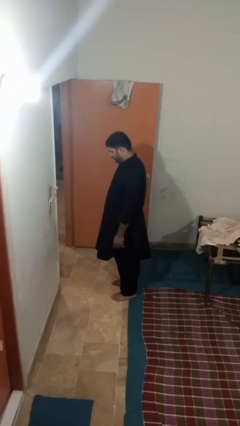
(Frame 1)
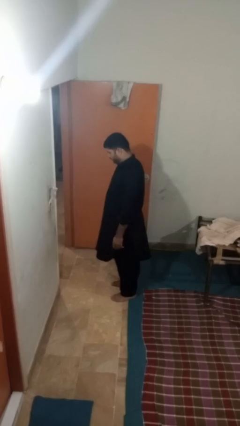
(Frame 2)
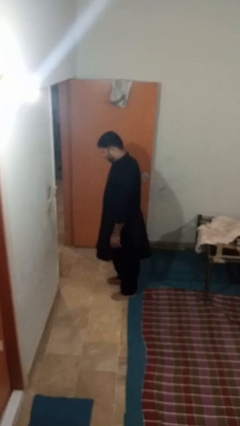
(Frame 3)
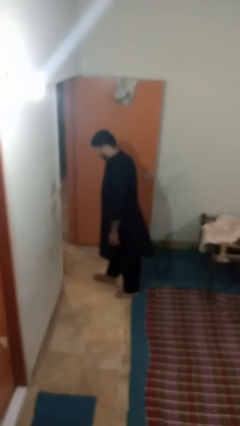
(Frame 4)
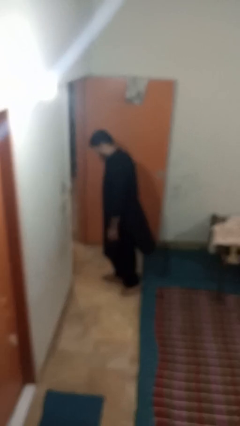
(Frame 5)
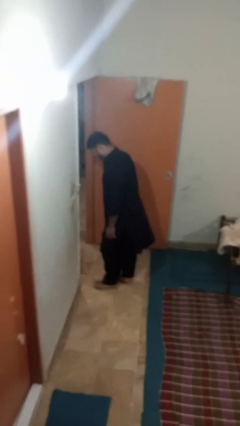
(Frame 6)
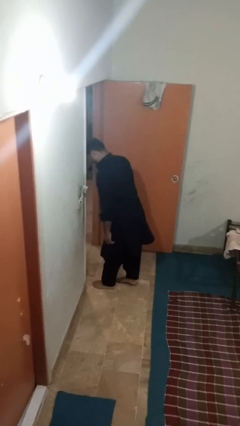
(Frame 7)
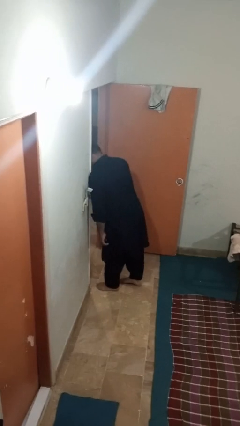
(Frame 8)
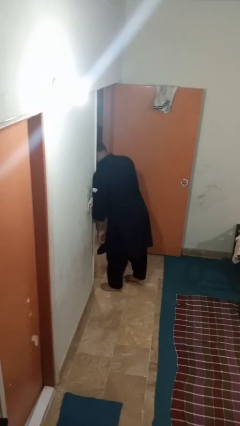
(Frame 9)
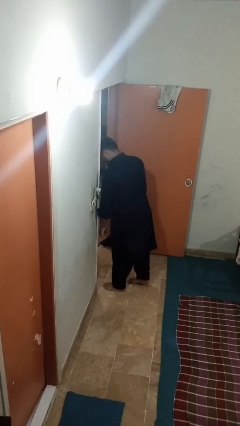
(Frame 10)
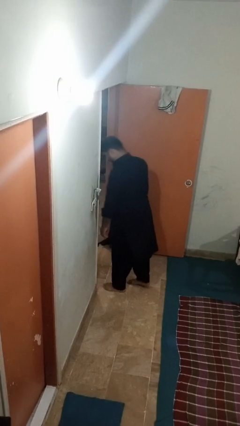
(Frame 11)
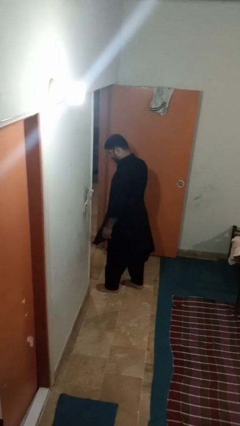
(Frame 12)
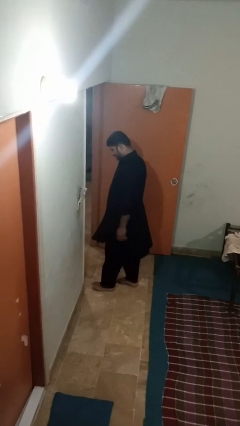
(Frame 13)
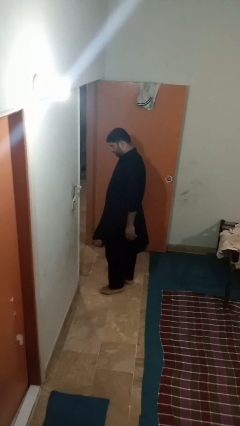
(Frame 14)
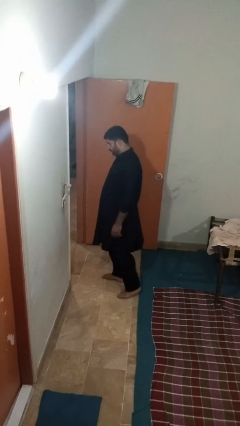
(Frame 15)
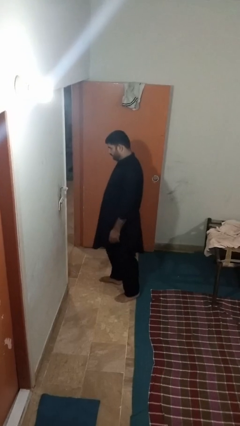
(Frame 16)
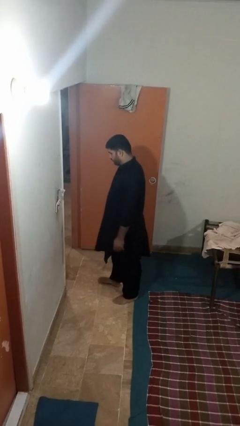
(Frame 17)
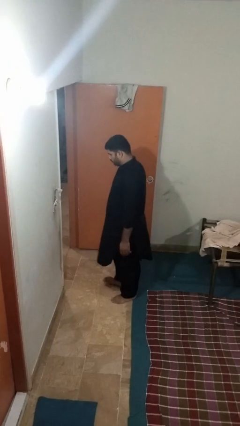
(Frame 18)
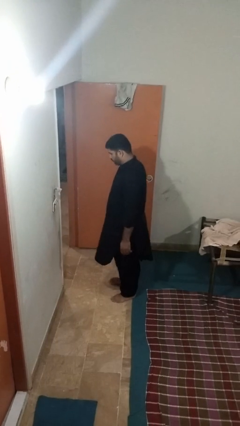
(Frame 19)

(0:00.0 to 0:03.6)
person bumps into wall

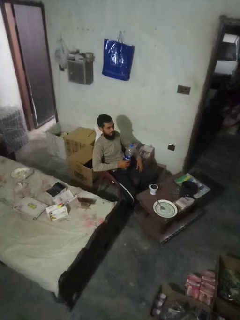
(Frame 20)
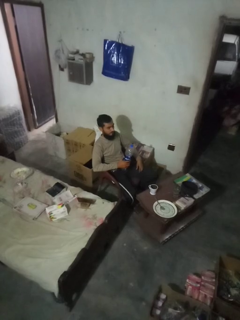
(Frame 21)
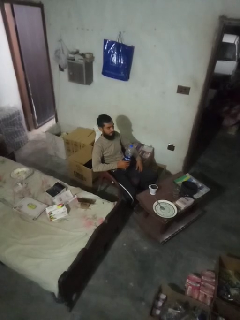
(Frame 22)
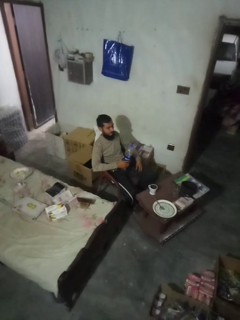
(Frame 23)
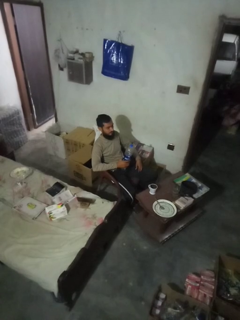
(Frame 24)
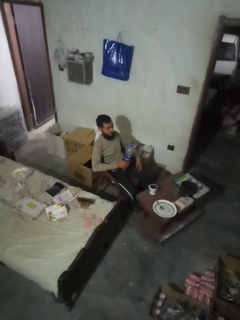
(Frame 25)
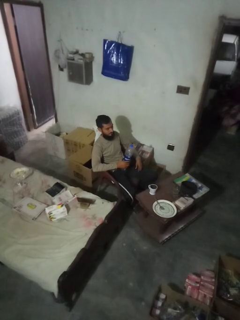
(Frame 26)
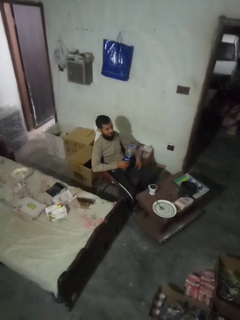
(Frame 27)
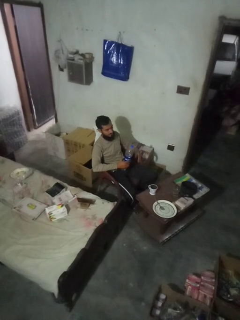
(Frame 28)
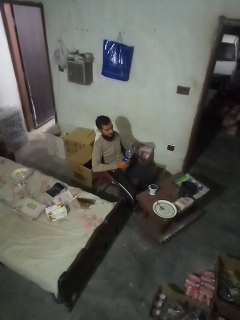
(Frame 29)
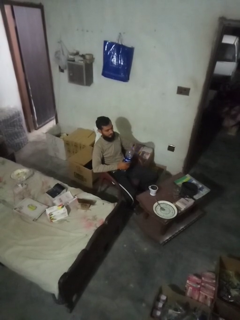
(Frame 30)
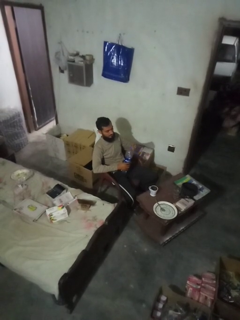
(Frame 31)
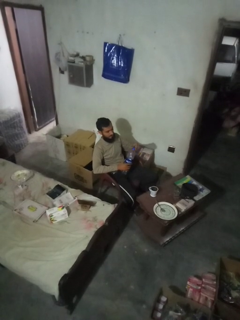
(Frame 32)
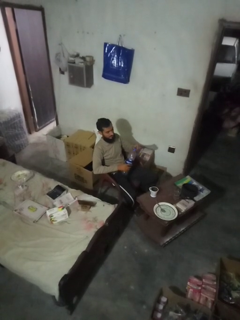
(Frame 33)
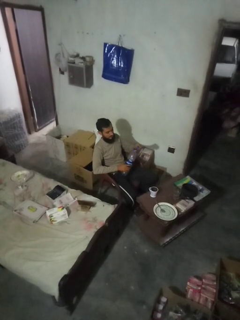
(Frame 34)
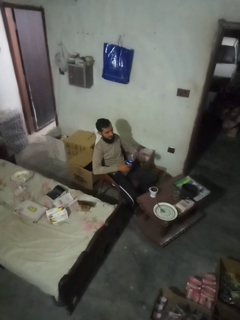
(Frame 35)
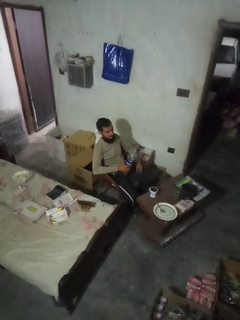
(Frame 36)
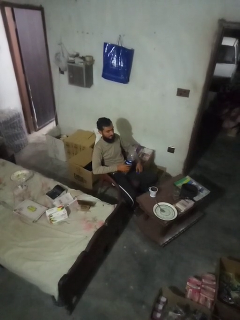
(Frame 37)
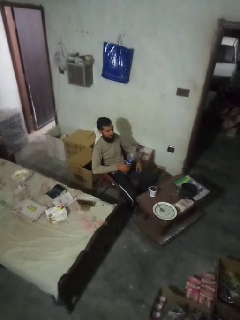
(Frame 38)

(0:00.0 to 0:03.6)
person unscrews lid from bottle

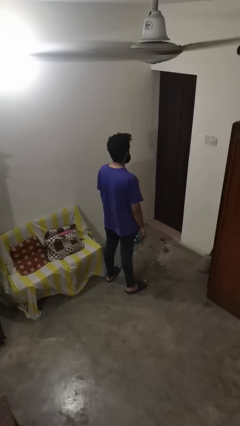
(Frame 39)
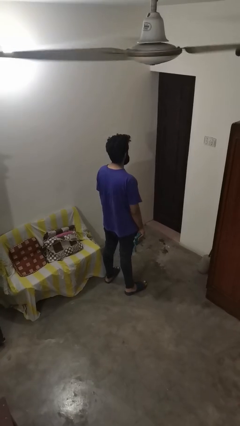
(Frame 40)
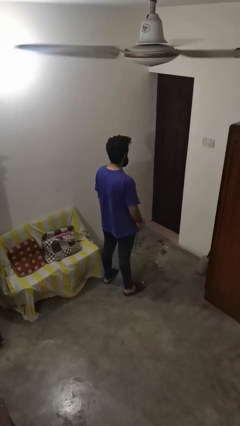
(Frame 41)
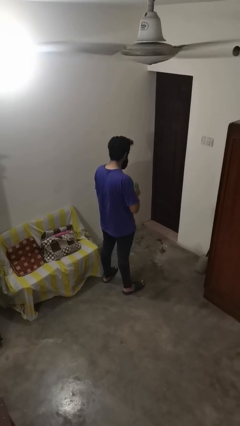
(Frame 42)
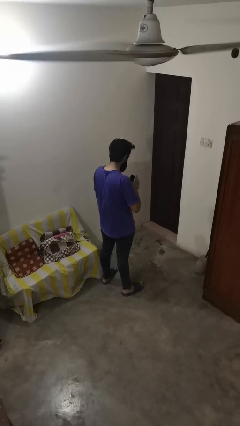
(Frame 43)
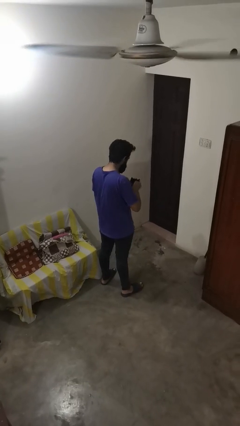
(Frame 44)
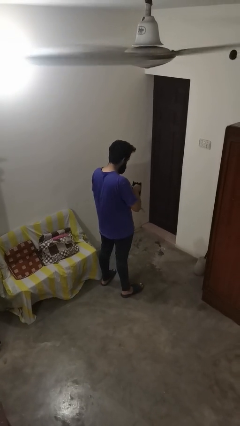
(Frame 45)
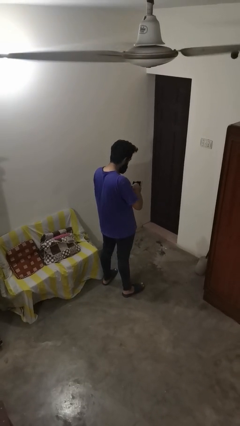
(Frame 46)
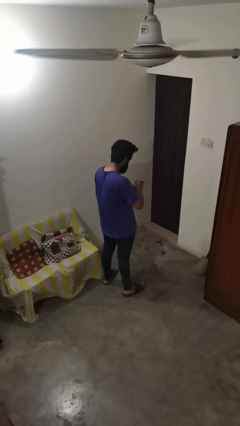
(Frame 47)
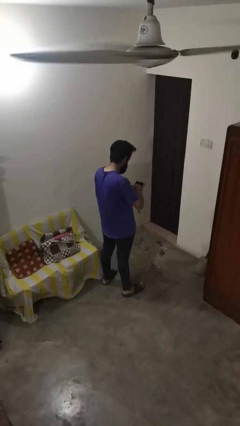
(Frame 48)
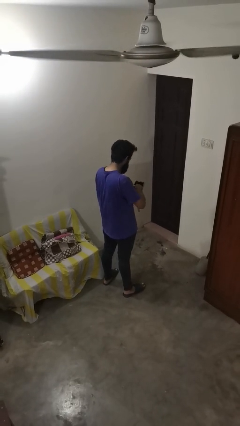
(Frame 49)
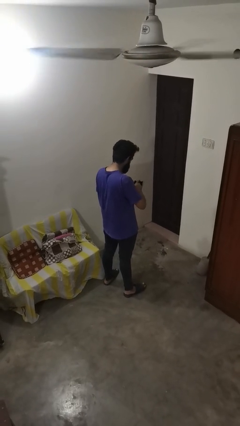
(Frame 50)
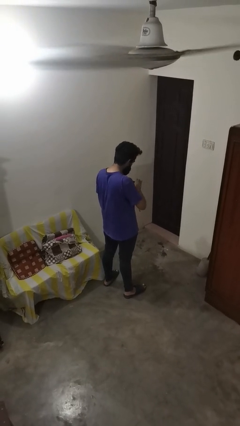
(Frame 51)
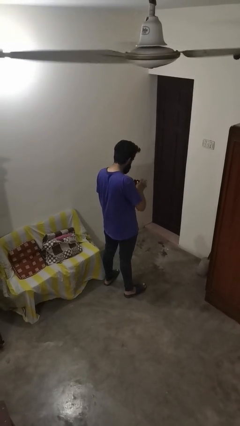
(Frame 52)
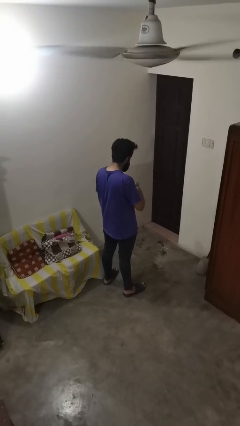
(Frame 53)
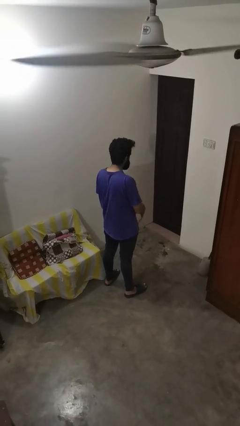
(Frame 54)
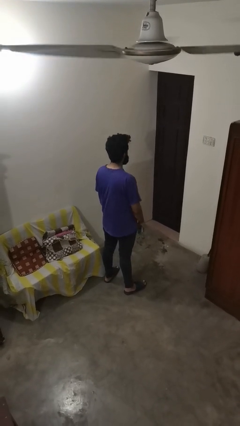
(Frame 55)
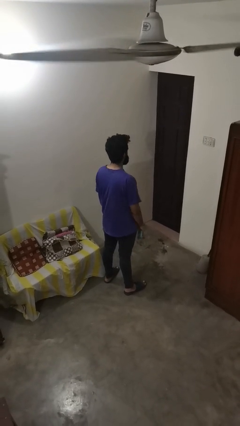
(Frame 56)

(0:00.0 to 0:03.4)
person searches in bag

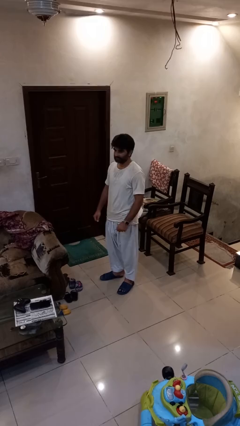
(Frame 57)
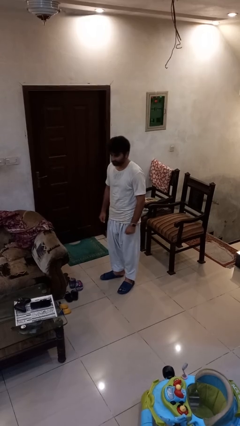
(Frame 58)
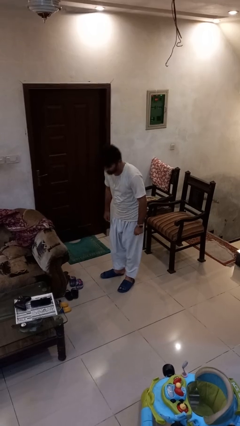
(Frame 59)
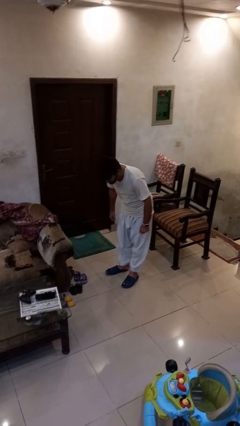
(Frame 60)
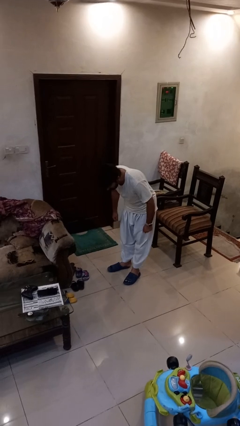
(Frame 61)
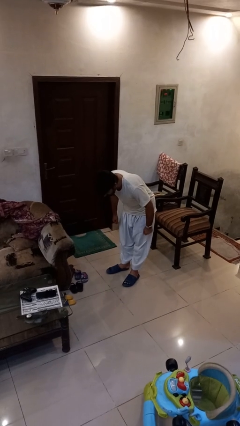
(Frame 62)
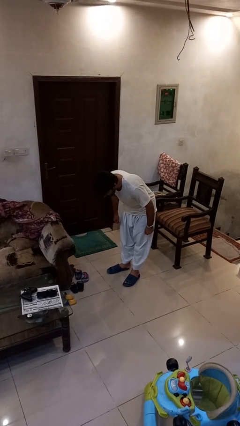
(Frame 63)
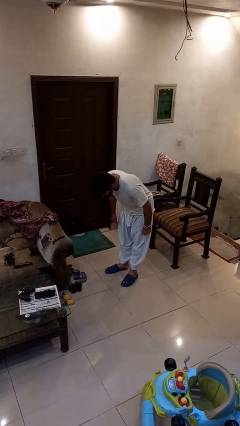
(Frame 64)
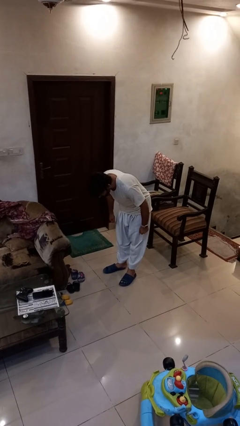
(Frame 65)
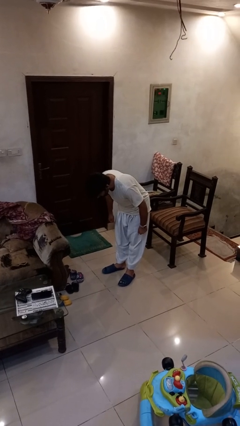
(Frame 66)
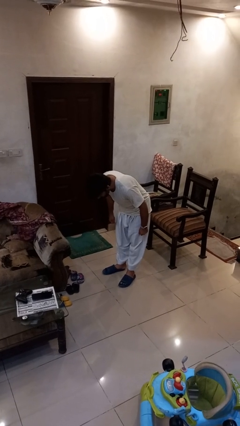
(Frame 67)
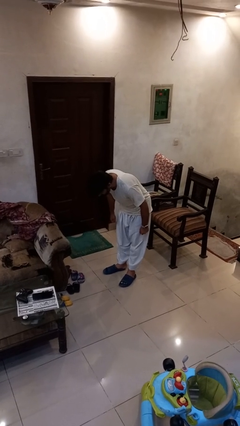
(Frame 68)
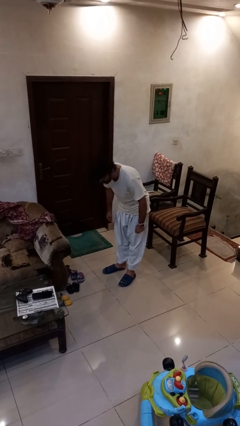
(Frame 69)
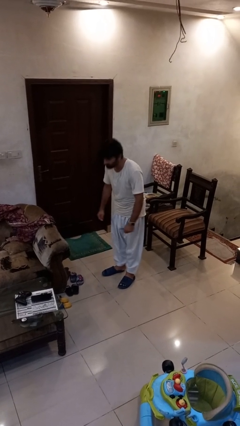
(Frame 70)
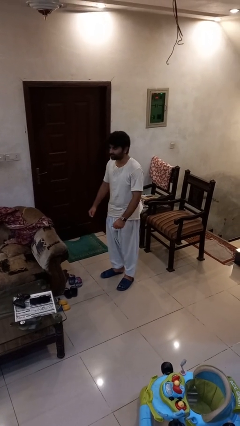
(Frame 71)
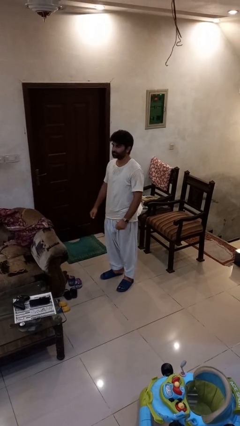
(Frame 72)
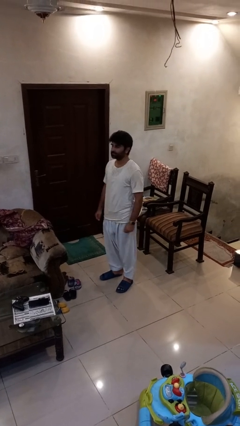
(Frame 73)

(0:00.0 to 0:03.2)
person bows

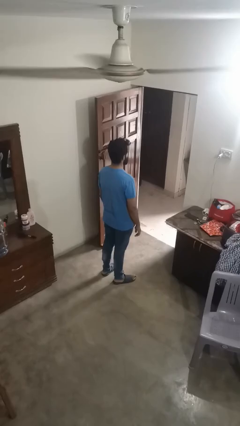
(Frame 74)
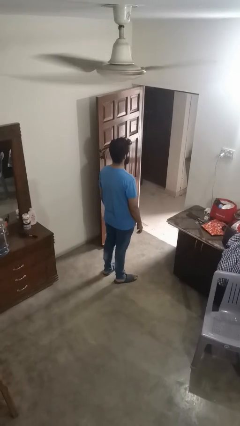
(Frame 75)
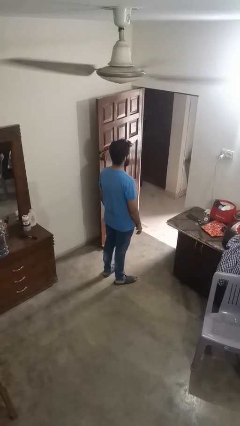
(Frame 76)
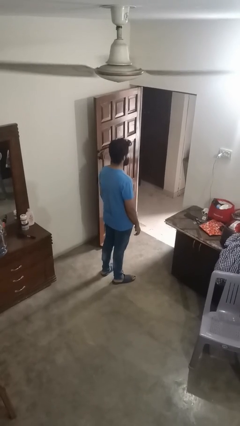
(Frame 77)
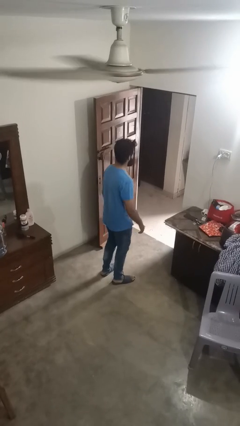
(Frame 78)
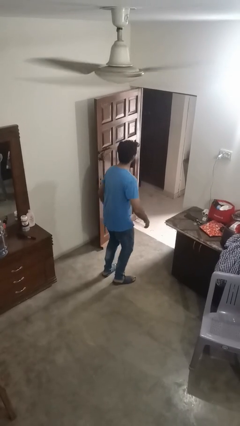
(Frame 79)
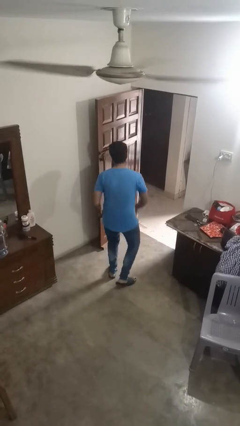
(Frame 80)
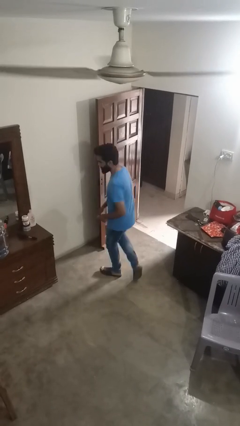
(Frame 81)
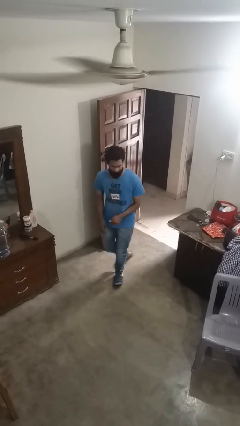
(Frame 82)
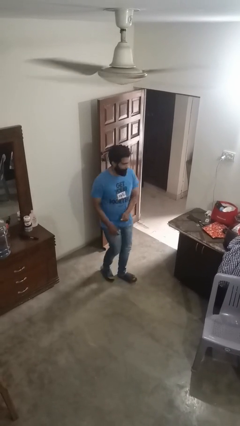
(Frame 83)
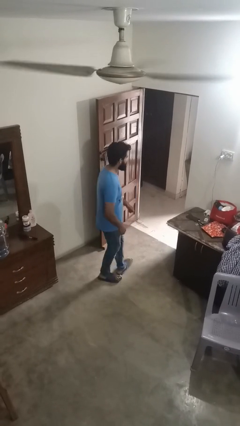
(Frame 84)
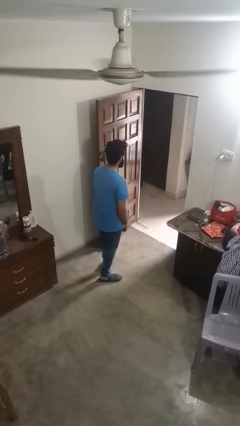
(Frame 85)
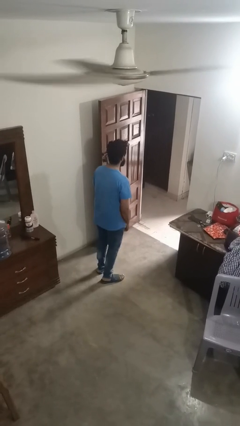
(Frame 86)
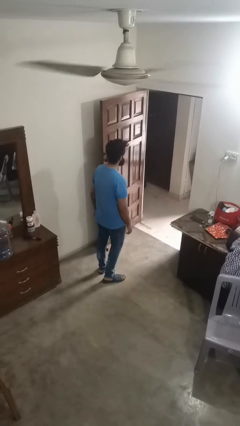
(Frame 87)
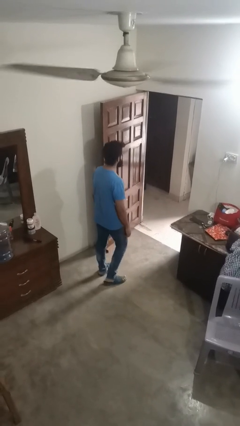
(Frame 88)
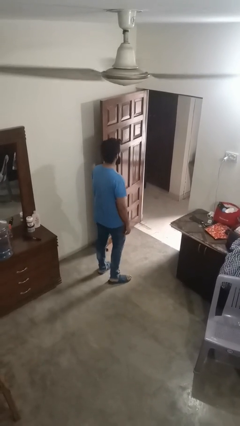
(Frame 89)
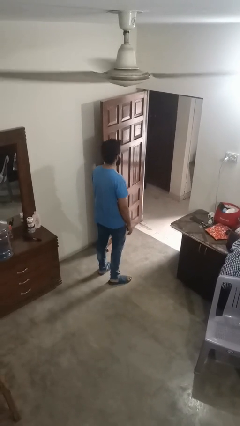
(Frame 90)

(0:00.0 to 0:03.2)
person twirls

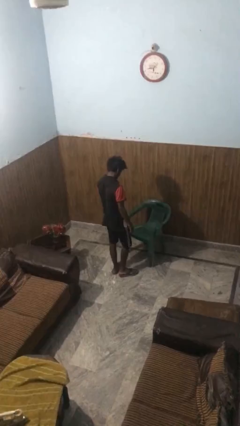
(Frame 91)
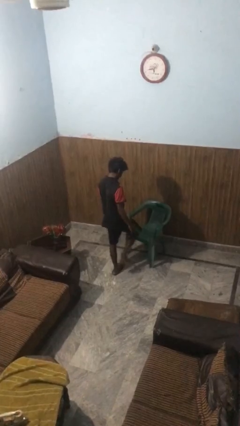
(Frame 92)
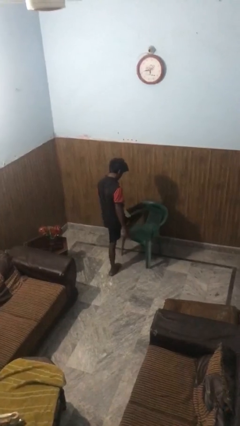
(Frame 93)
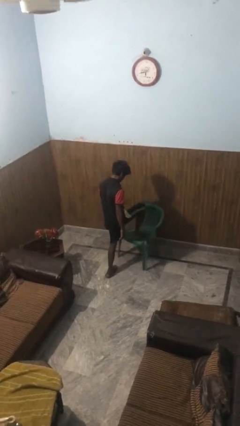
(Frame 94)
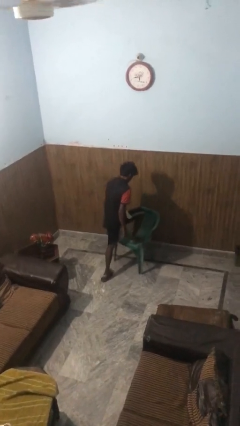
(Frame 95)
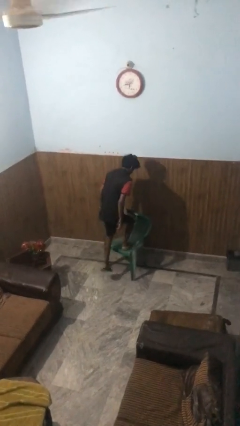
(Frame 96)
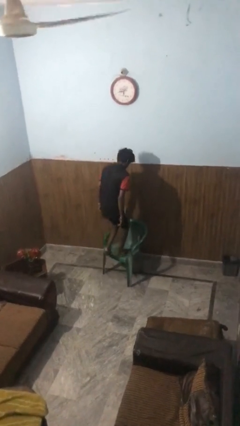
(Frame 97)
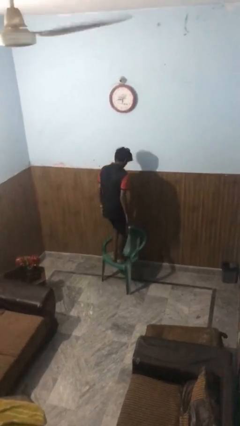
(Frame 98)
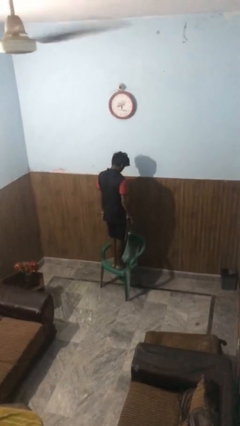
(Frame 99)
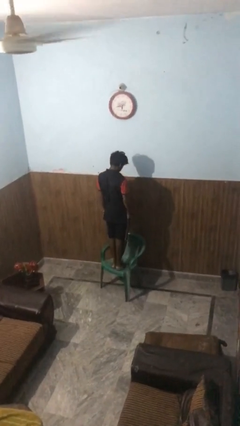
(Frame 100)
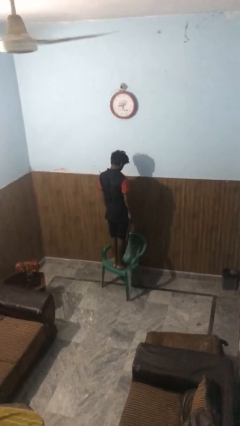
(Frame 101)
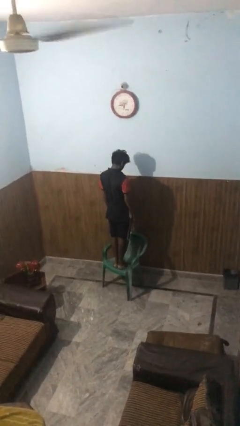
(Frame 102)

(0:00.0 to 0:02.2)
person climbs on chair
